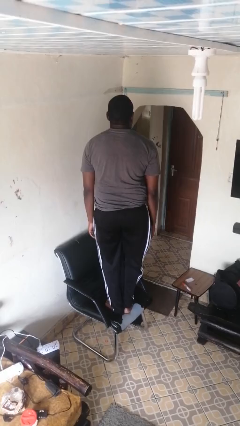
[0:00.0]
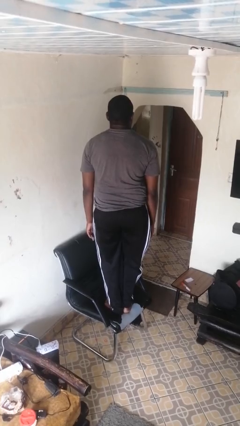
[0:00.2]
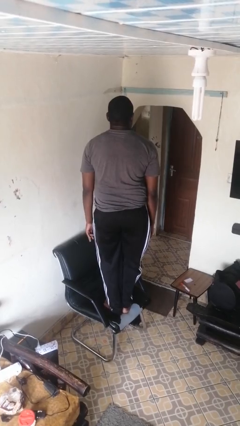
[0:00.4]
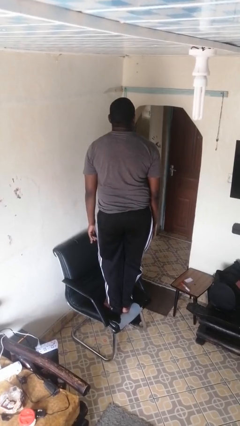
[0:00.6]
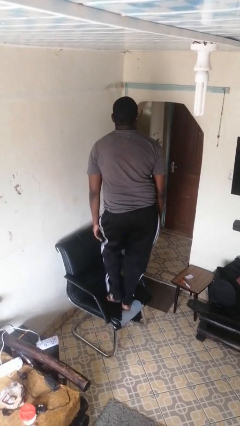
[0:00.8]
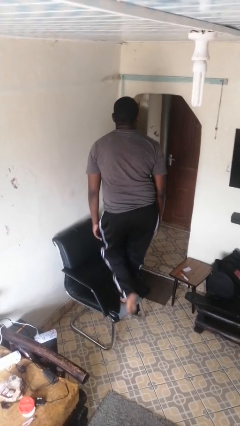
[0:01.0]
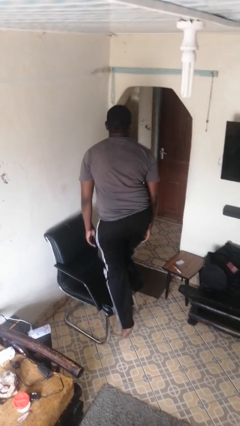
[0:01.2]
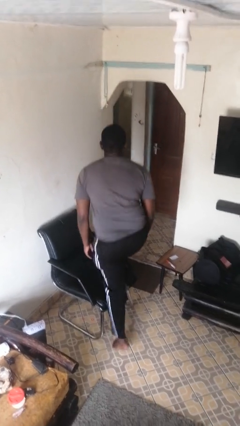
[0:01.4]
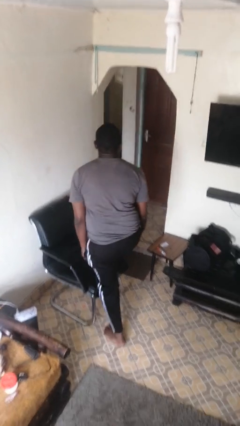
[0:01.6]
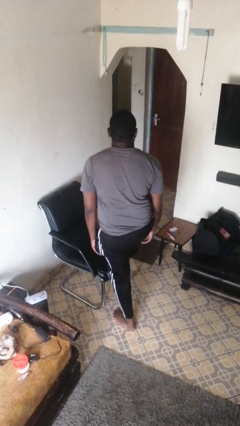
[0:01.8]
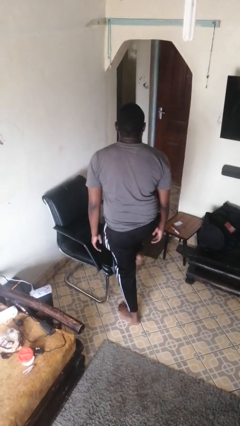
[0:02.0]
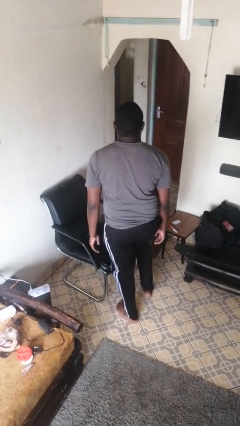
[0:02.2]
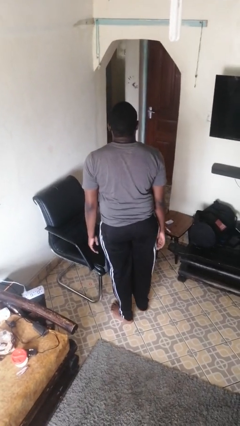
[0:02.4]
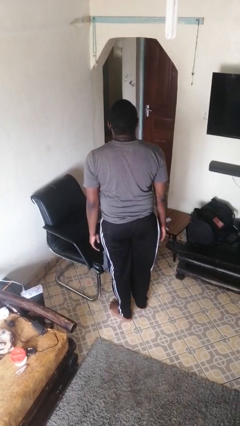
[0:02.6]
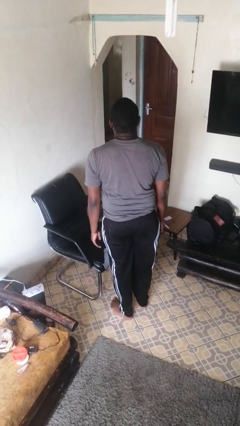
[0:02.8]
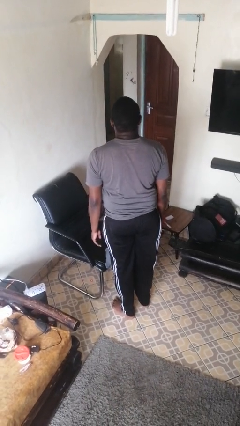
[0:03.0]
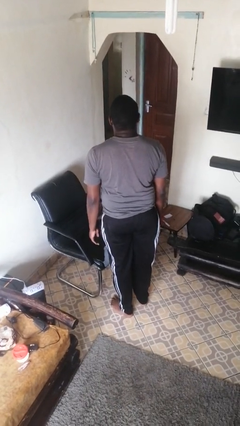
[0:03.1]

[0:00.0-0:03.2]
person climbs off chair

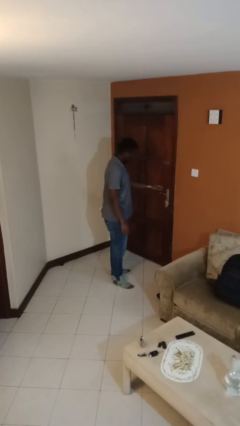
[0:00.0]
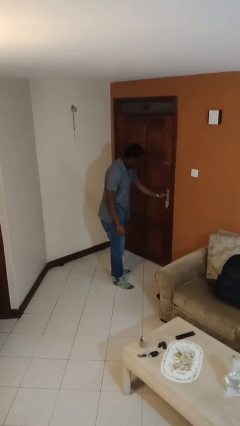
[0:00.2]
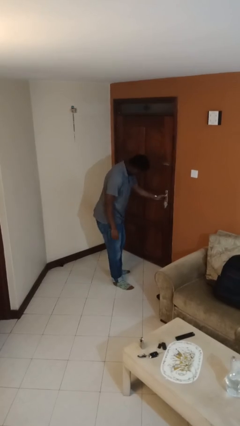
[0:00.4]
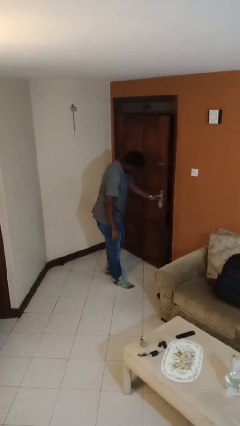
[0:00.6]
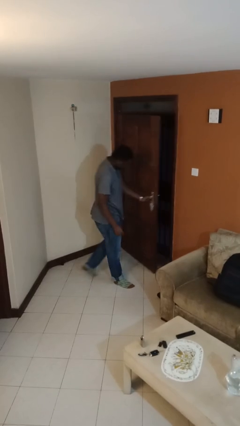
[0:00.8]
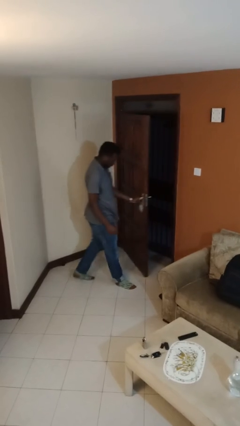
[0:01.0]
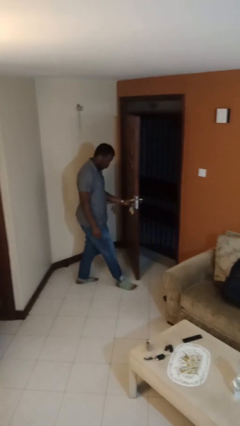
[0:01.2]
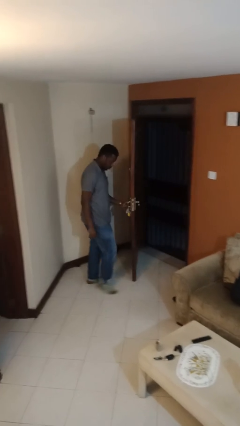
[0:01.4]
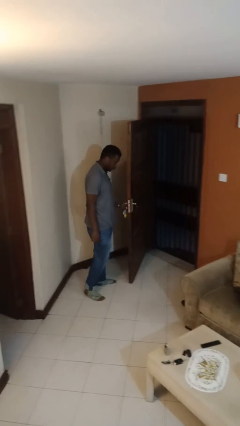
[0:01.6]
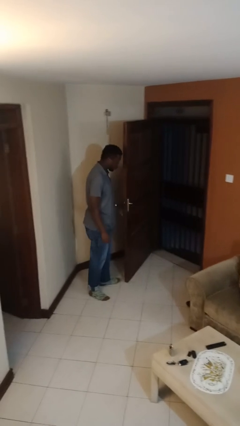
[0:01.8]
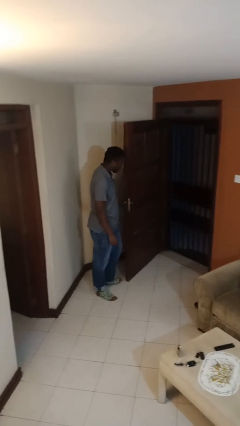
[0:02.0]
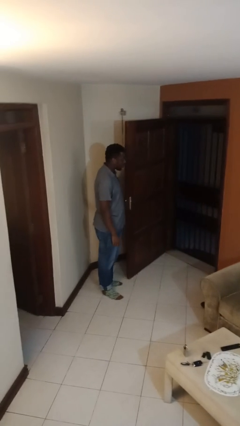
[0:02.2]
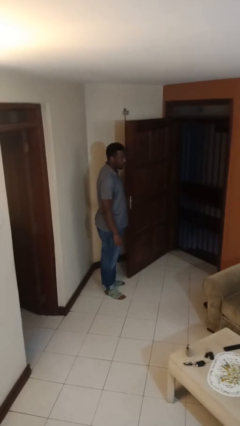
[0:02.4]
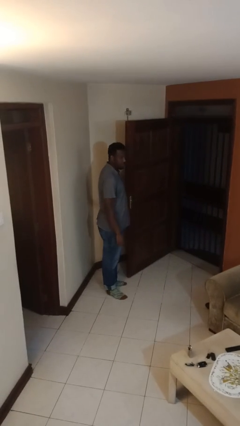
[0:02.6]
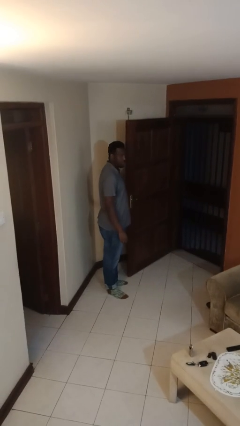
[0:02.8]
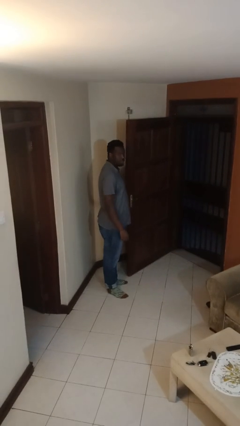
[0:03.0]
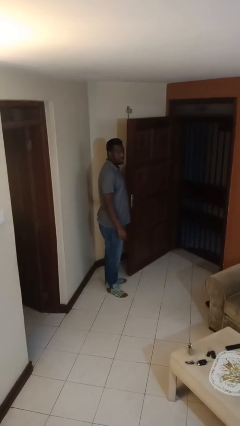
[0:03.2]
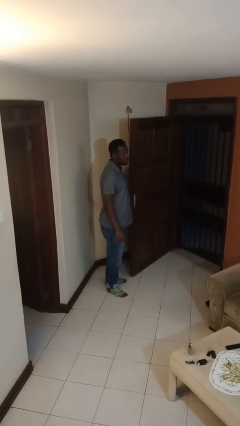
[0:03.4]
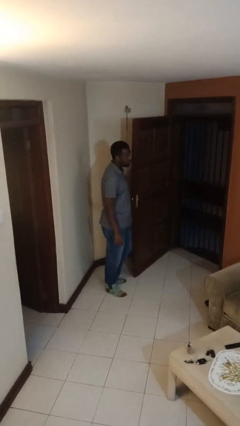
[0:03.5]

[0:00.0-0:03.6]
person opens facility door

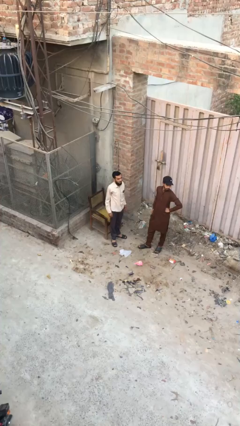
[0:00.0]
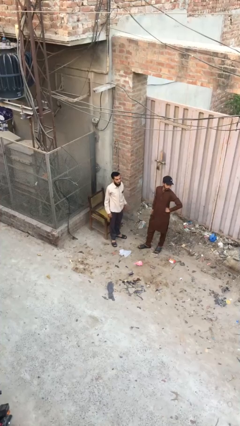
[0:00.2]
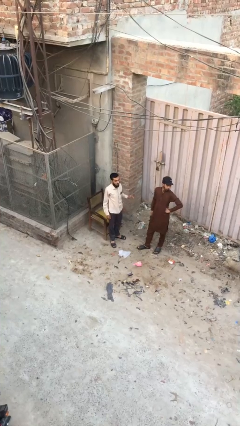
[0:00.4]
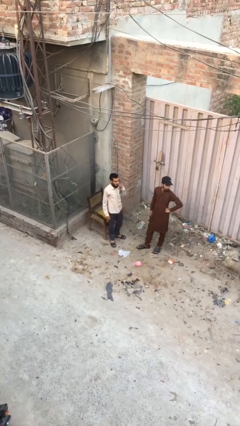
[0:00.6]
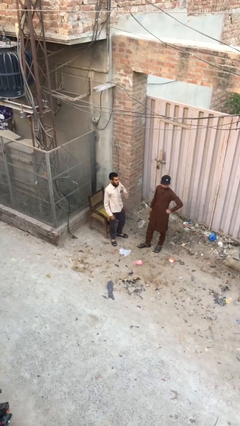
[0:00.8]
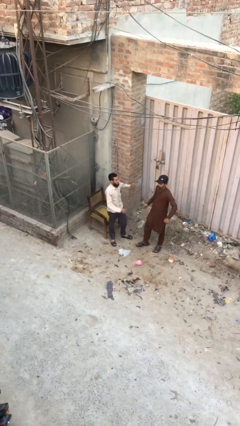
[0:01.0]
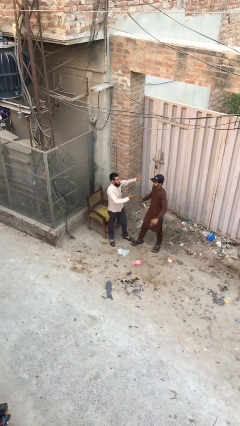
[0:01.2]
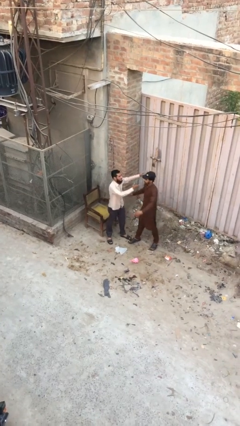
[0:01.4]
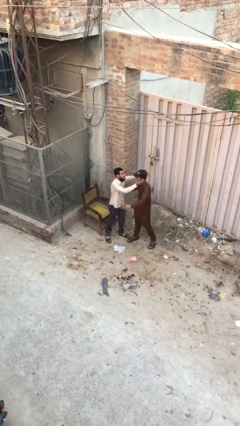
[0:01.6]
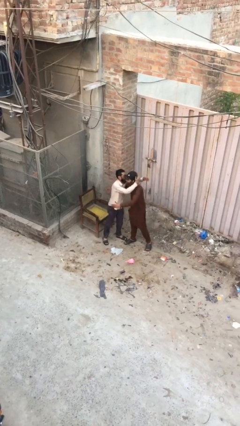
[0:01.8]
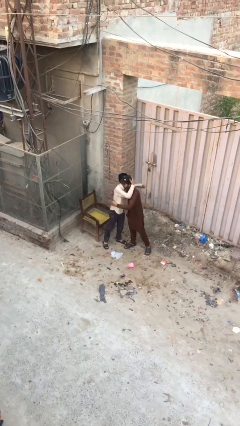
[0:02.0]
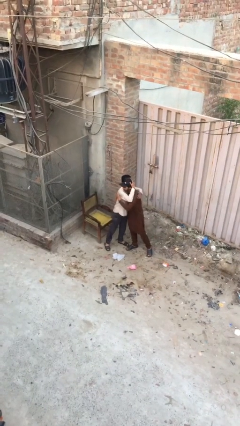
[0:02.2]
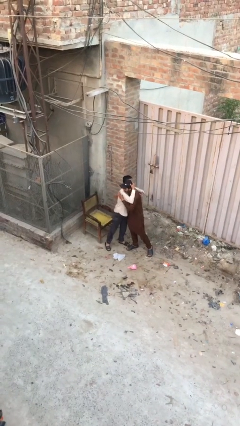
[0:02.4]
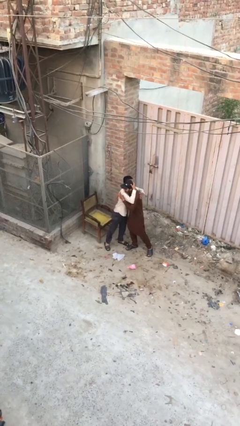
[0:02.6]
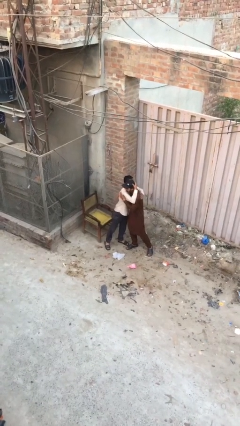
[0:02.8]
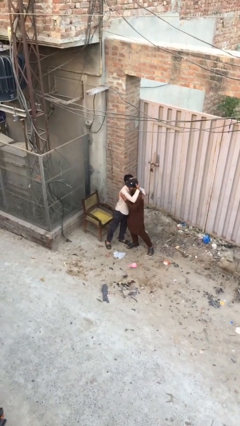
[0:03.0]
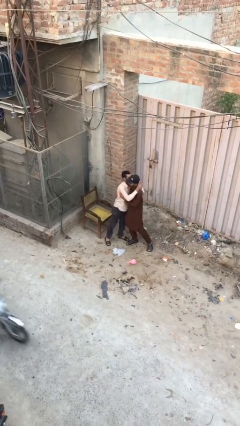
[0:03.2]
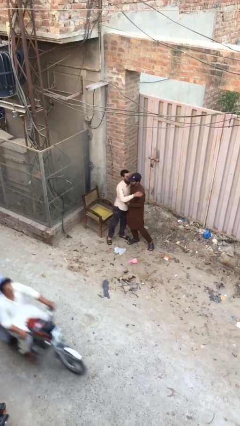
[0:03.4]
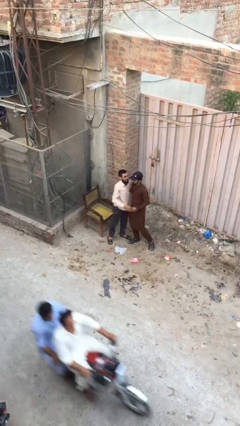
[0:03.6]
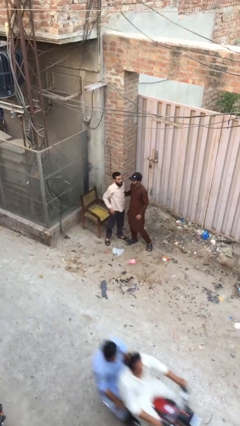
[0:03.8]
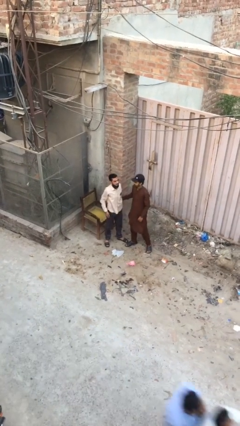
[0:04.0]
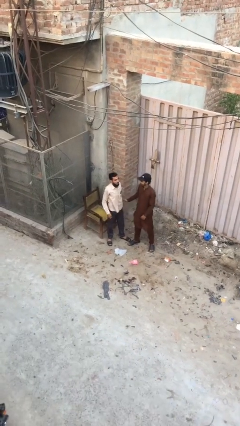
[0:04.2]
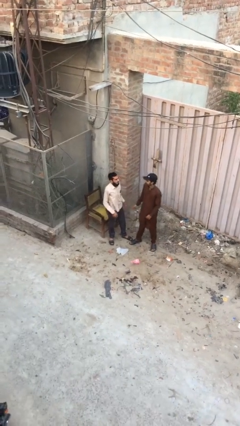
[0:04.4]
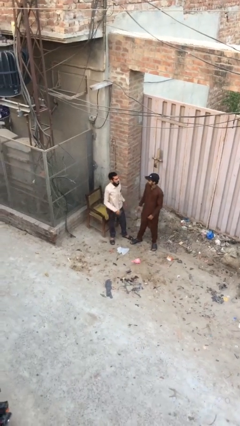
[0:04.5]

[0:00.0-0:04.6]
person embraces person

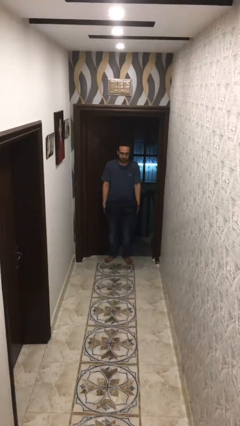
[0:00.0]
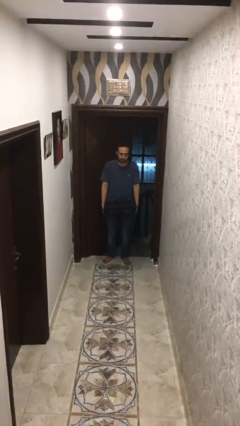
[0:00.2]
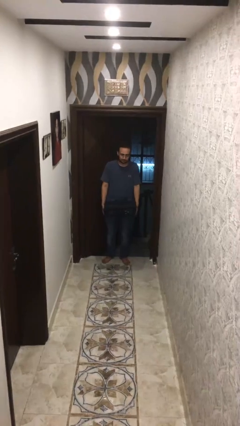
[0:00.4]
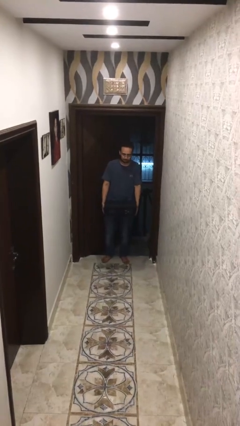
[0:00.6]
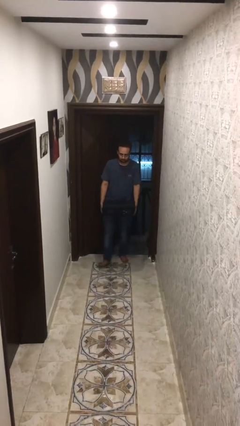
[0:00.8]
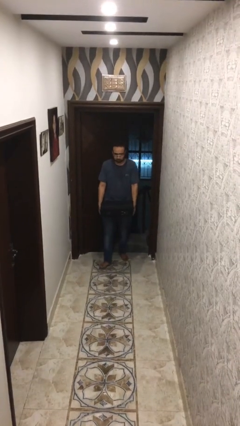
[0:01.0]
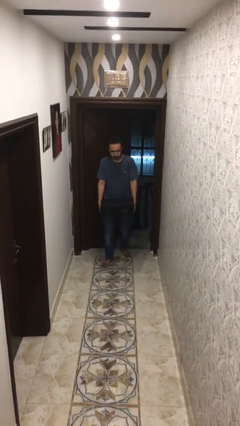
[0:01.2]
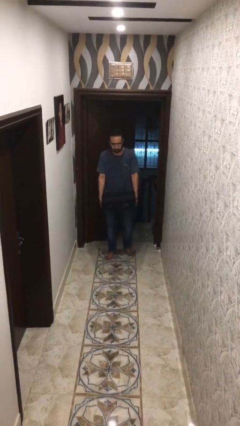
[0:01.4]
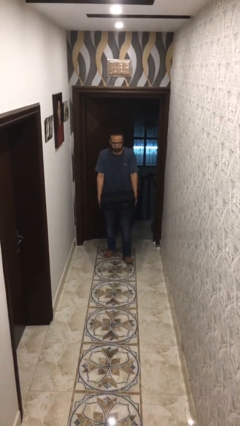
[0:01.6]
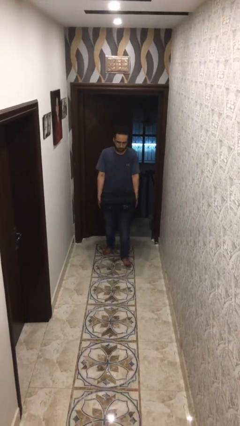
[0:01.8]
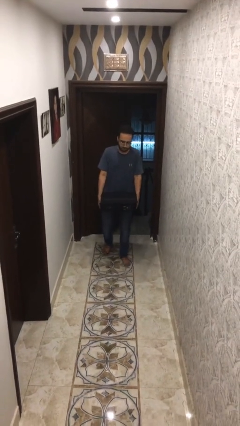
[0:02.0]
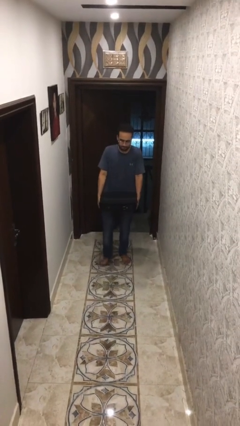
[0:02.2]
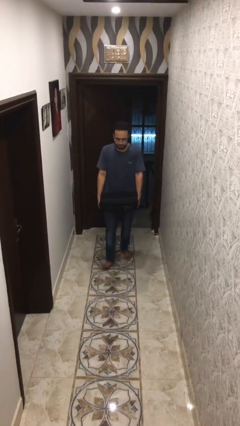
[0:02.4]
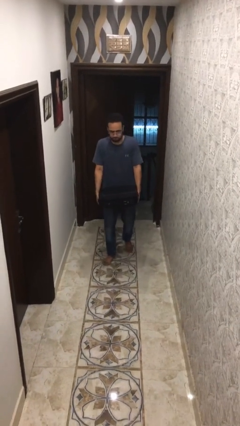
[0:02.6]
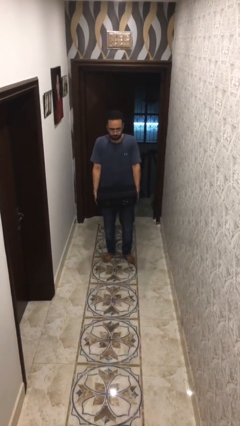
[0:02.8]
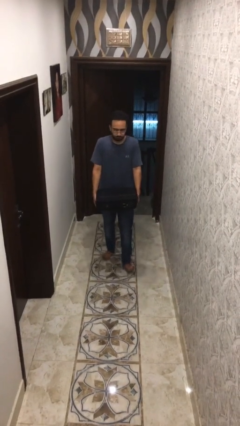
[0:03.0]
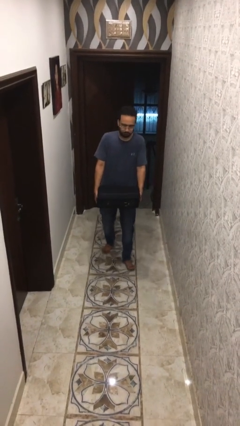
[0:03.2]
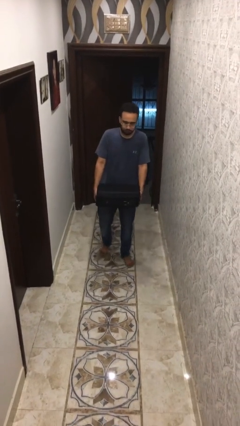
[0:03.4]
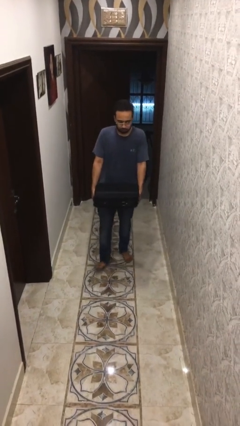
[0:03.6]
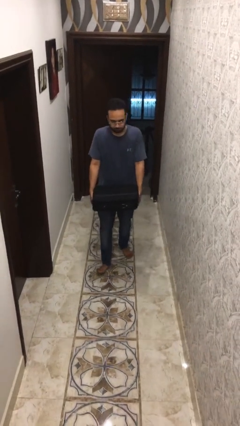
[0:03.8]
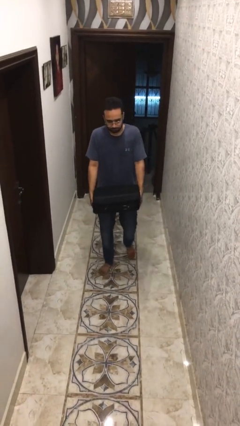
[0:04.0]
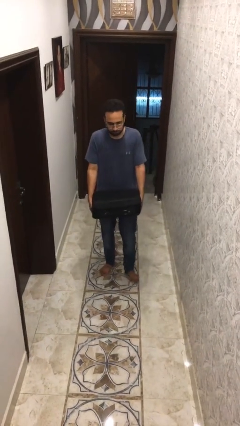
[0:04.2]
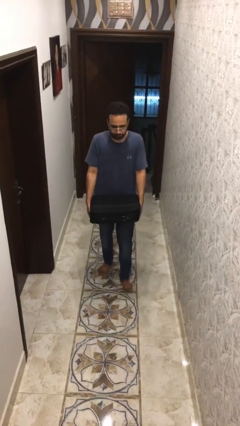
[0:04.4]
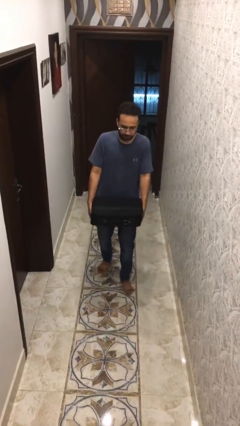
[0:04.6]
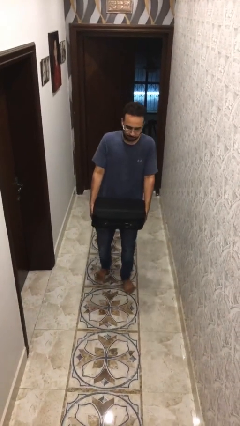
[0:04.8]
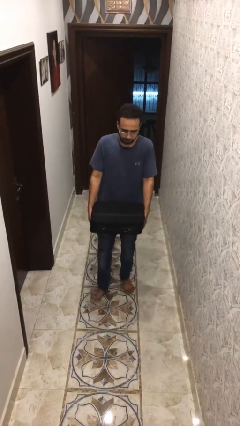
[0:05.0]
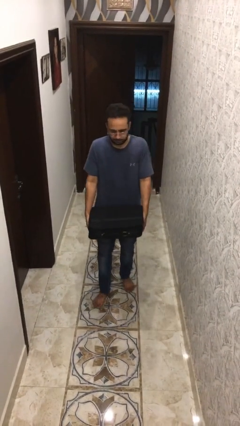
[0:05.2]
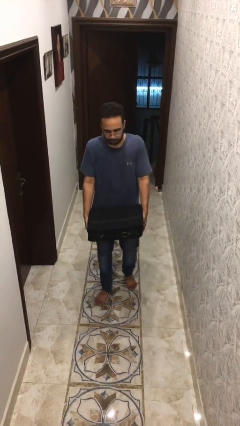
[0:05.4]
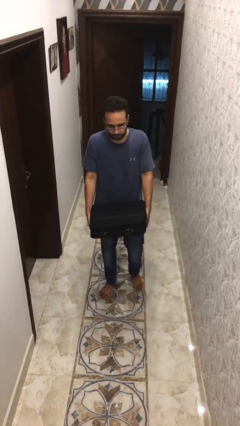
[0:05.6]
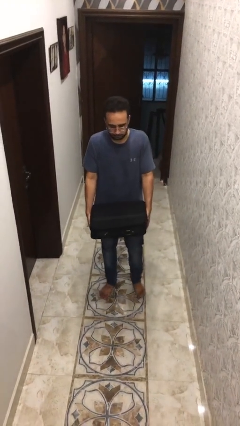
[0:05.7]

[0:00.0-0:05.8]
person carries heavy object

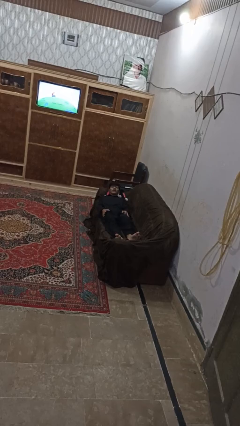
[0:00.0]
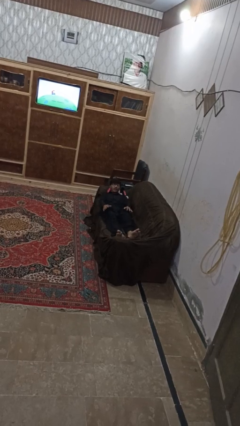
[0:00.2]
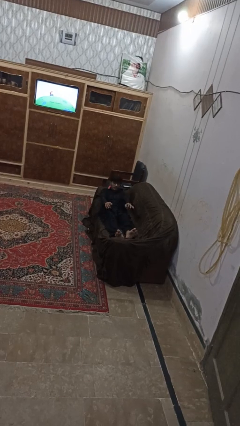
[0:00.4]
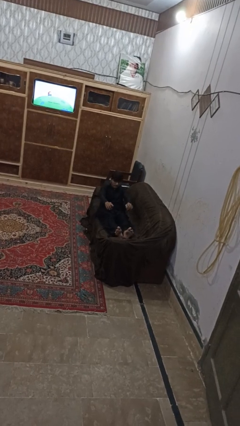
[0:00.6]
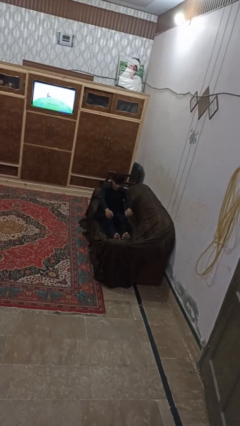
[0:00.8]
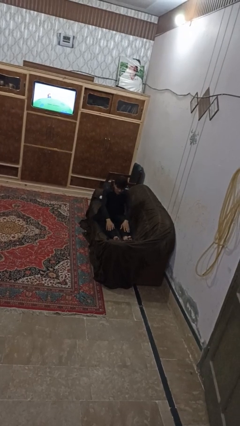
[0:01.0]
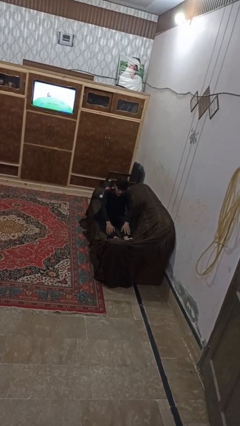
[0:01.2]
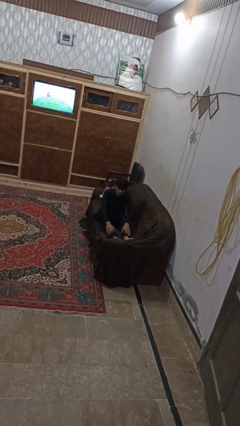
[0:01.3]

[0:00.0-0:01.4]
person stands up
